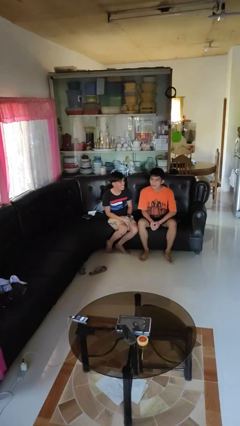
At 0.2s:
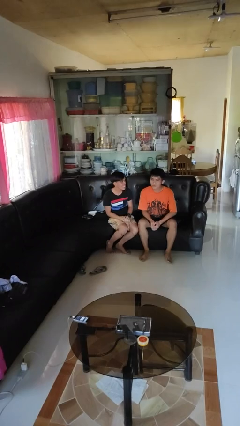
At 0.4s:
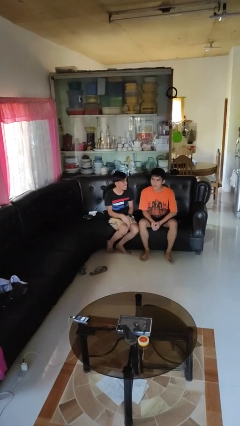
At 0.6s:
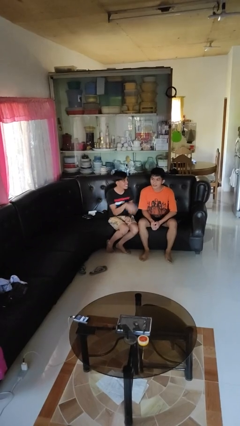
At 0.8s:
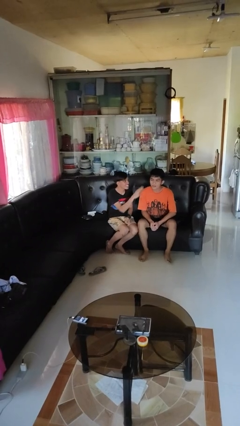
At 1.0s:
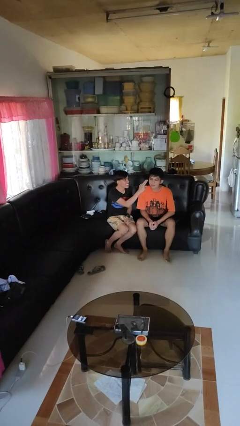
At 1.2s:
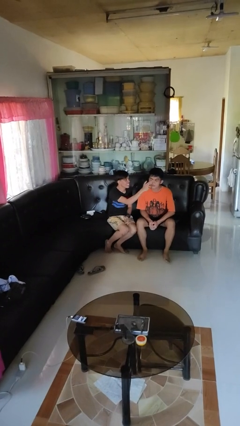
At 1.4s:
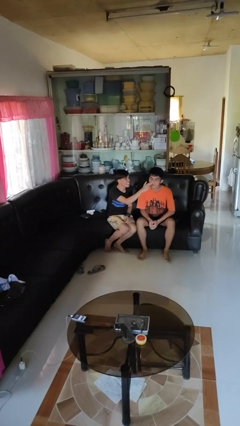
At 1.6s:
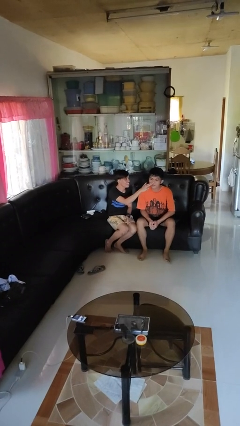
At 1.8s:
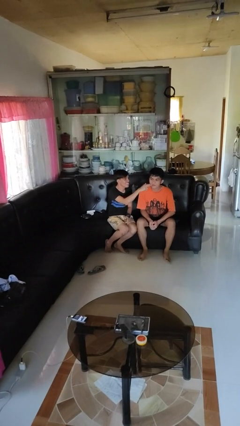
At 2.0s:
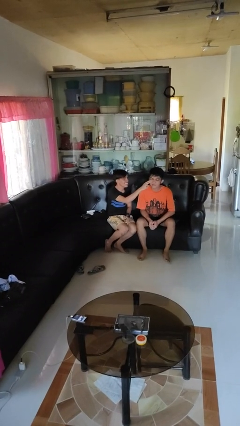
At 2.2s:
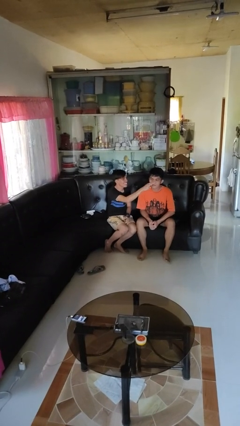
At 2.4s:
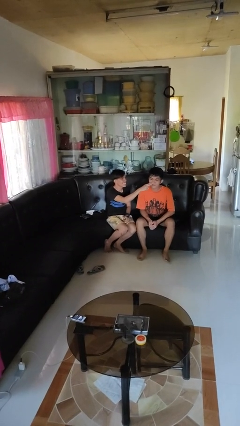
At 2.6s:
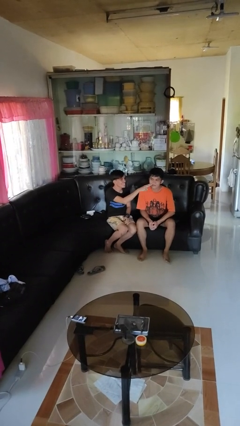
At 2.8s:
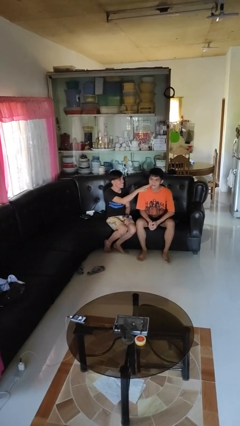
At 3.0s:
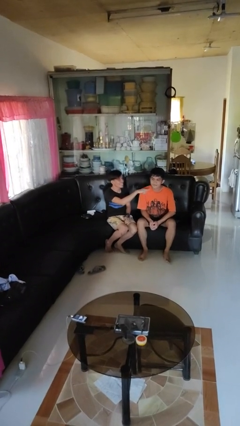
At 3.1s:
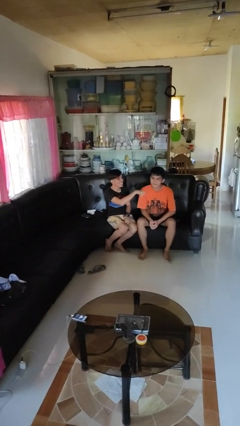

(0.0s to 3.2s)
person touches face of person

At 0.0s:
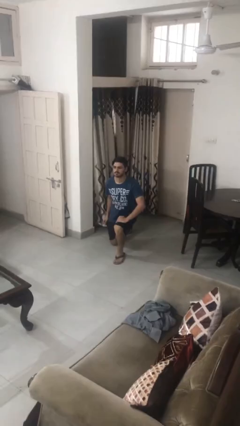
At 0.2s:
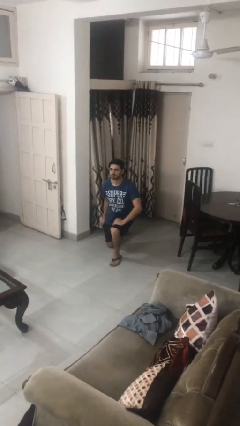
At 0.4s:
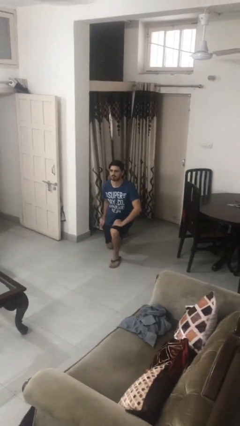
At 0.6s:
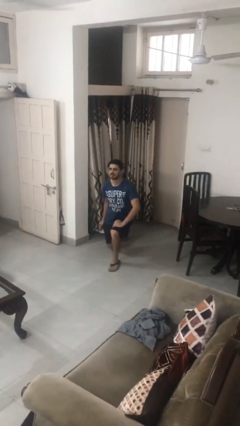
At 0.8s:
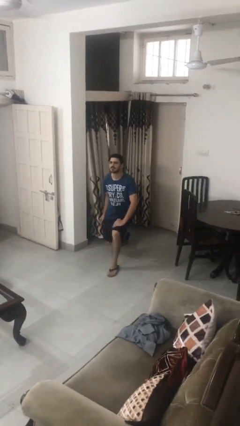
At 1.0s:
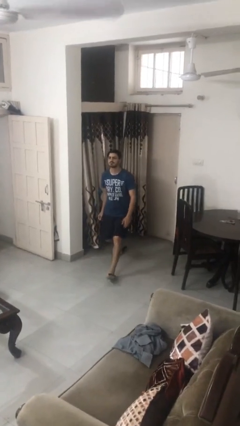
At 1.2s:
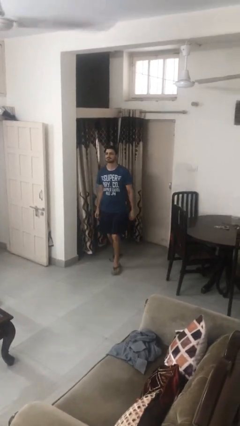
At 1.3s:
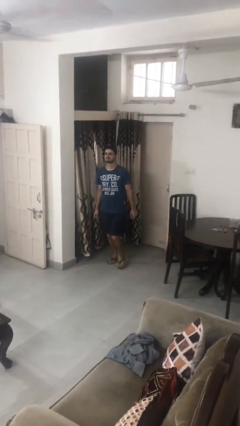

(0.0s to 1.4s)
person stands up from floor

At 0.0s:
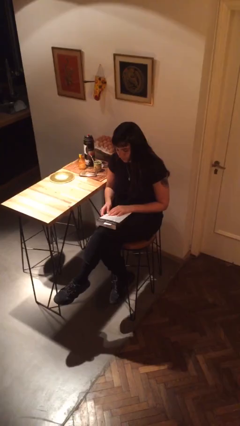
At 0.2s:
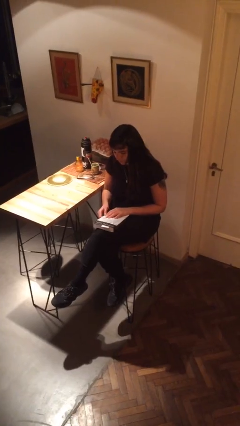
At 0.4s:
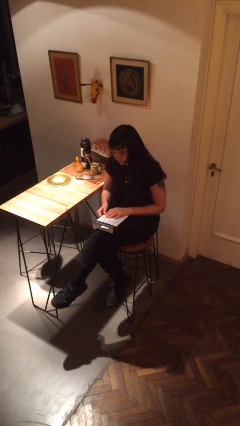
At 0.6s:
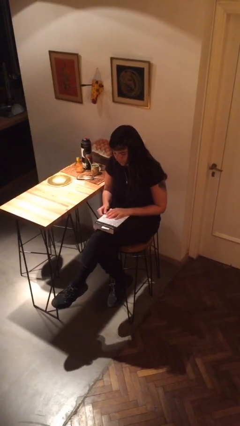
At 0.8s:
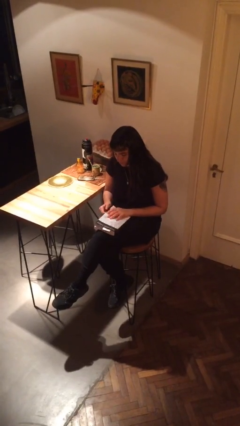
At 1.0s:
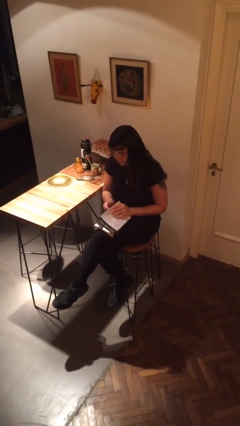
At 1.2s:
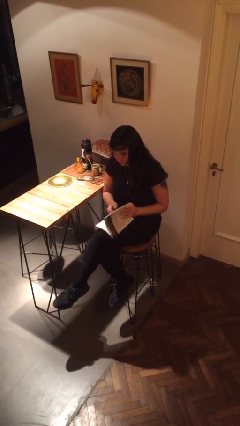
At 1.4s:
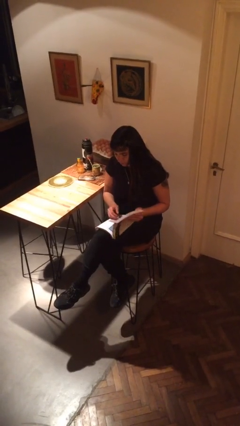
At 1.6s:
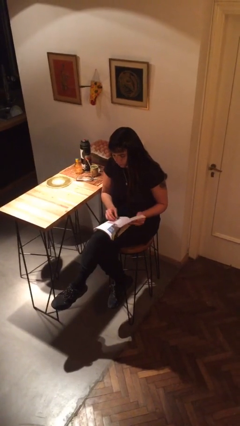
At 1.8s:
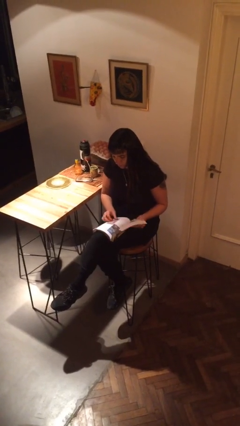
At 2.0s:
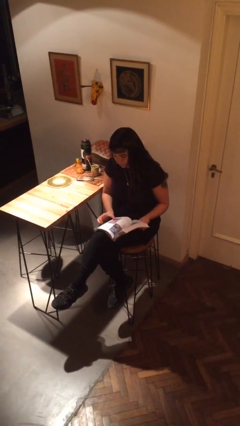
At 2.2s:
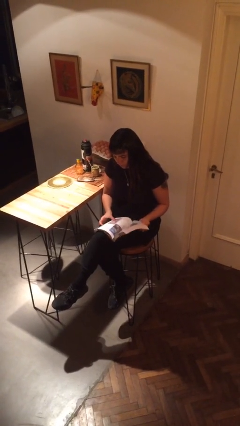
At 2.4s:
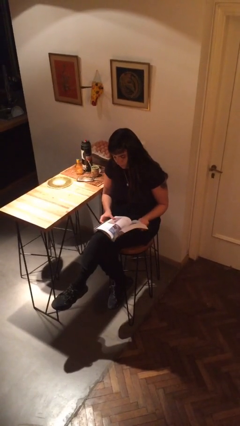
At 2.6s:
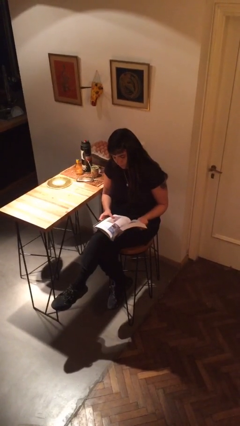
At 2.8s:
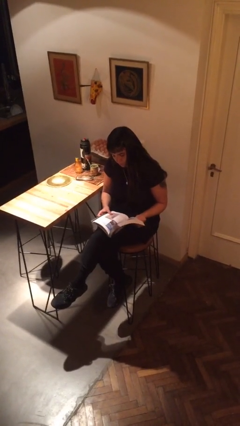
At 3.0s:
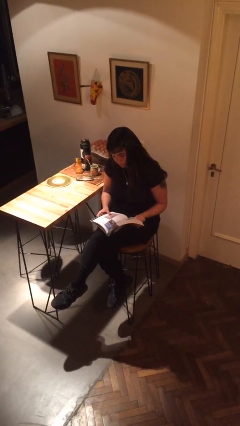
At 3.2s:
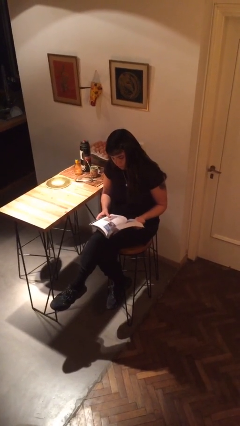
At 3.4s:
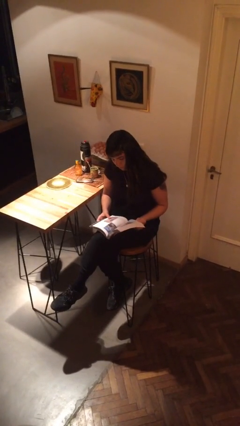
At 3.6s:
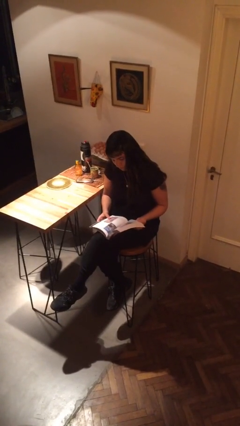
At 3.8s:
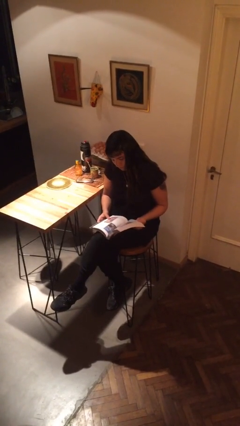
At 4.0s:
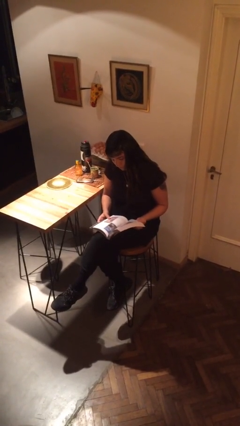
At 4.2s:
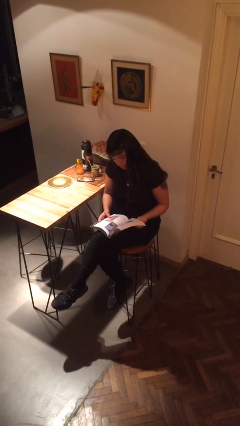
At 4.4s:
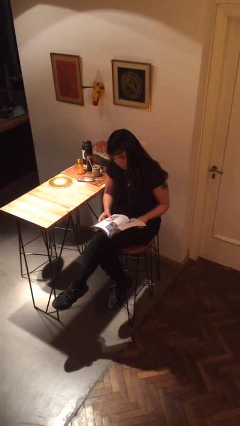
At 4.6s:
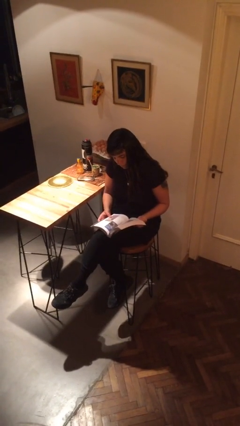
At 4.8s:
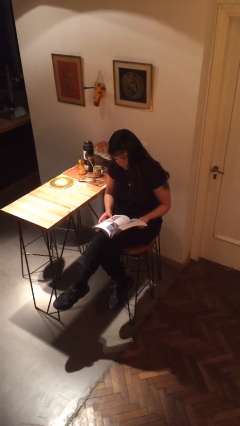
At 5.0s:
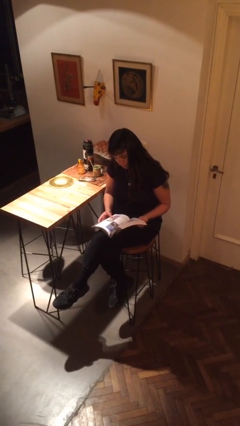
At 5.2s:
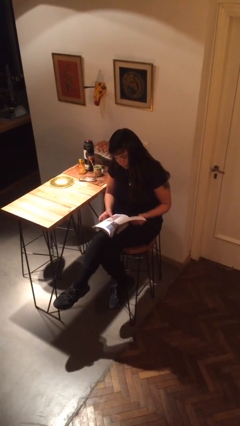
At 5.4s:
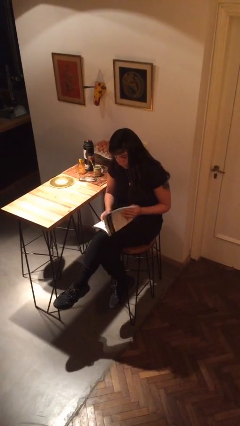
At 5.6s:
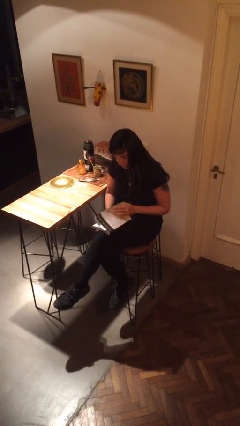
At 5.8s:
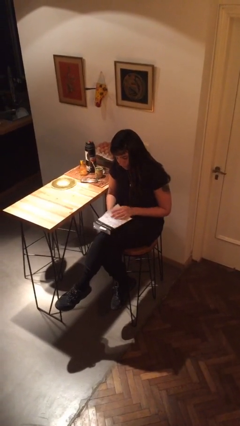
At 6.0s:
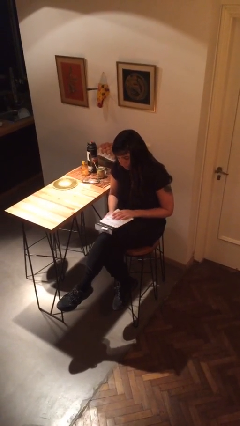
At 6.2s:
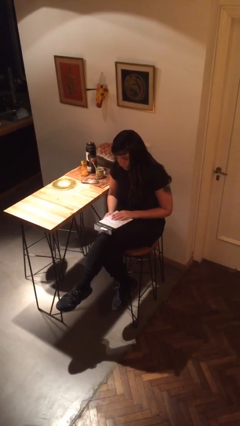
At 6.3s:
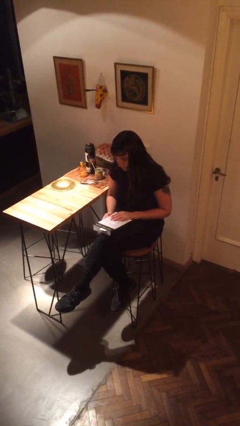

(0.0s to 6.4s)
person reads book

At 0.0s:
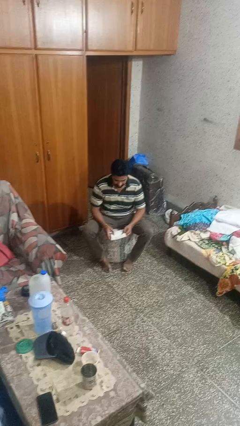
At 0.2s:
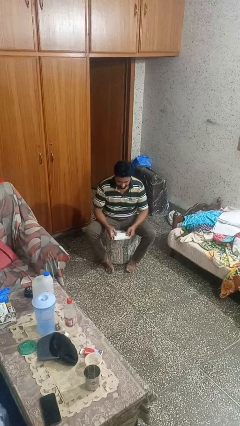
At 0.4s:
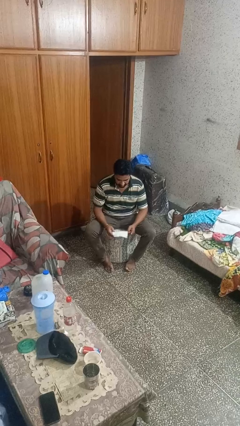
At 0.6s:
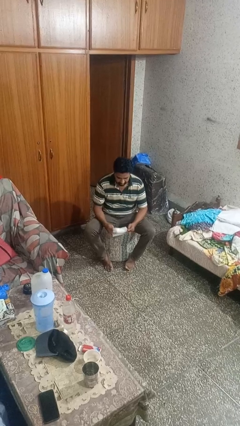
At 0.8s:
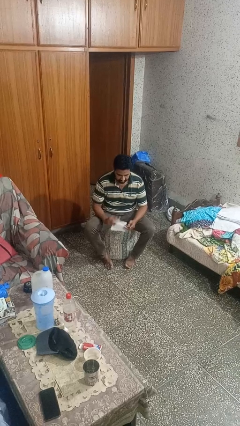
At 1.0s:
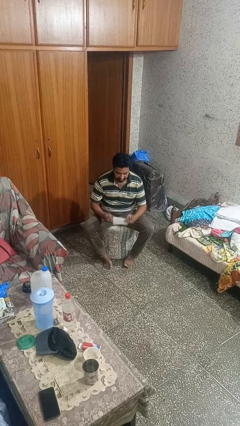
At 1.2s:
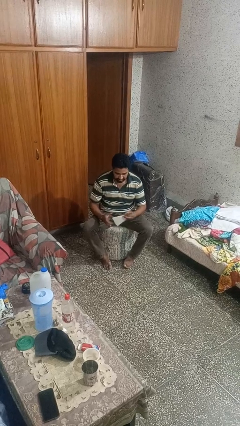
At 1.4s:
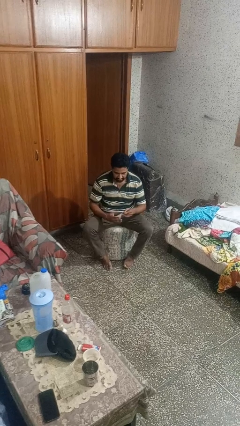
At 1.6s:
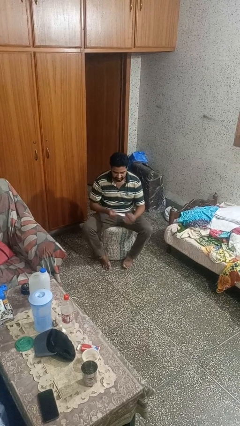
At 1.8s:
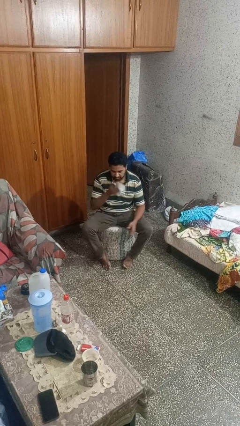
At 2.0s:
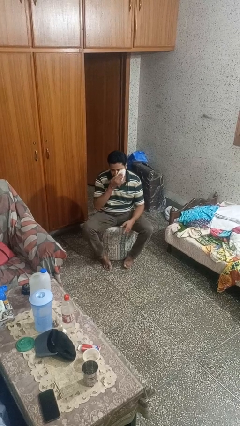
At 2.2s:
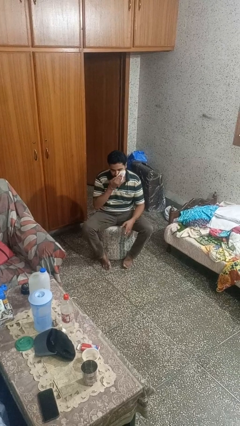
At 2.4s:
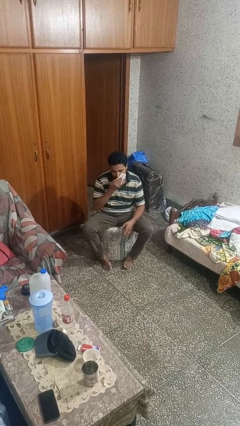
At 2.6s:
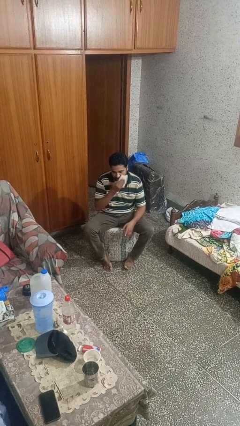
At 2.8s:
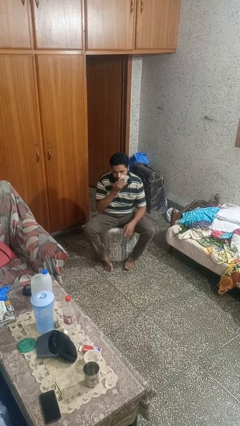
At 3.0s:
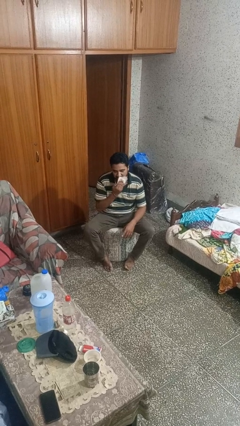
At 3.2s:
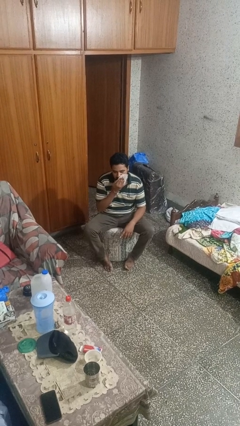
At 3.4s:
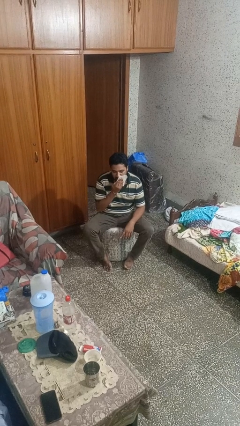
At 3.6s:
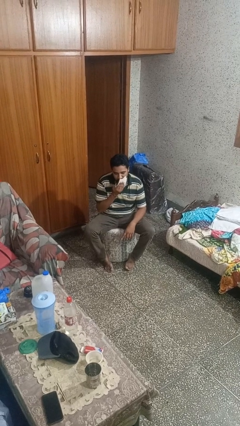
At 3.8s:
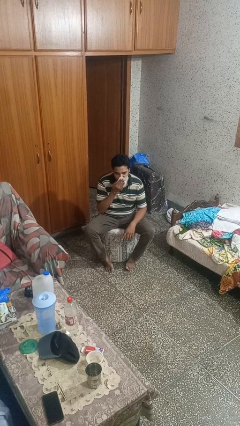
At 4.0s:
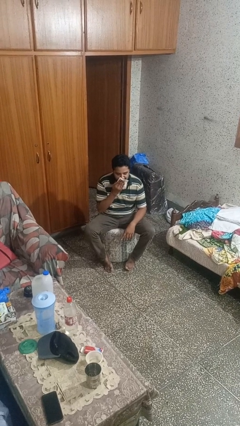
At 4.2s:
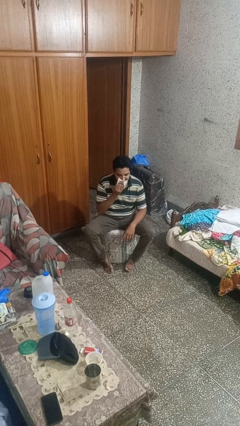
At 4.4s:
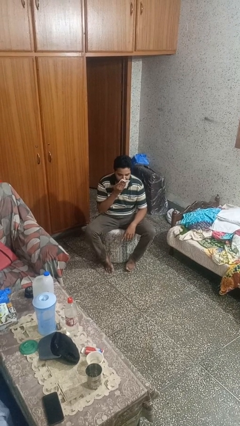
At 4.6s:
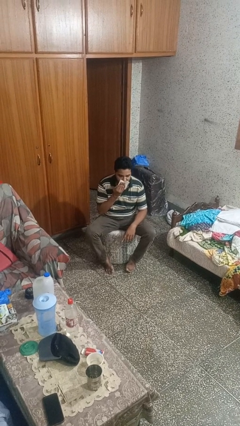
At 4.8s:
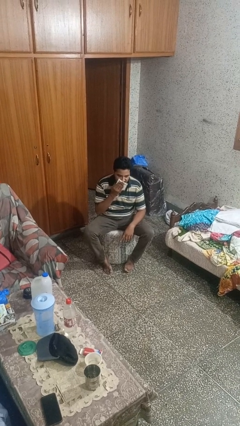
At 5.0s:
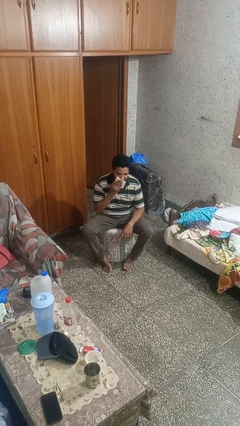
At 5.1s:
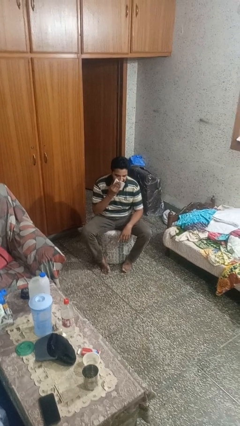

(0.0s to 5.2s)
person wipes mouth with napkin

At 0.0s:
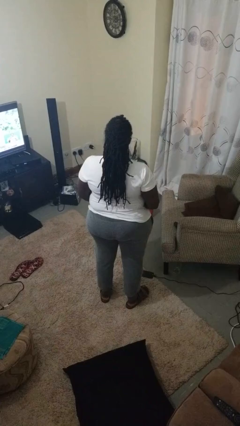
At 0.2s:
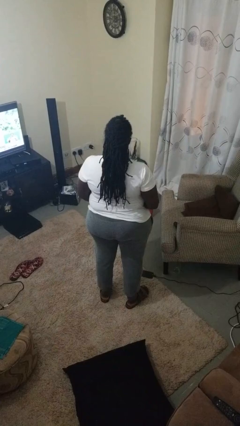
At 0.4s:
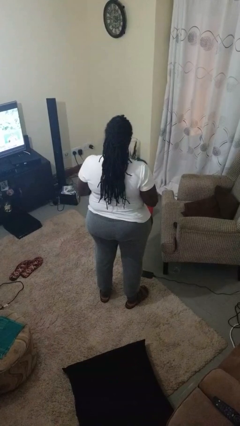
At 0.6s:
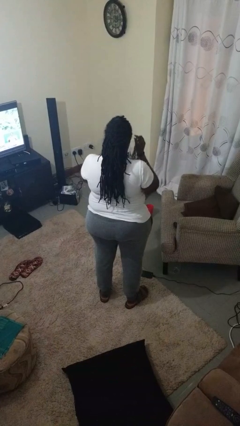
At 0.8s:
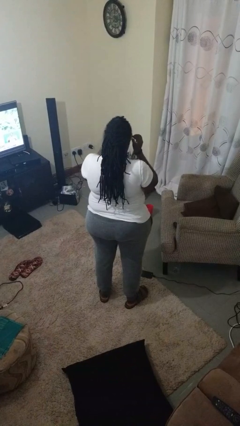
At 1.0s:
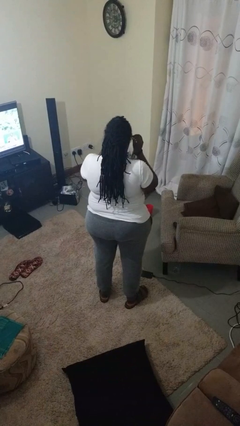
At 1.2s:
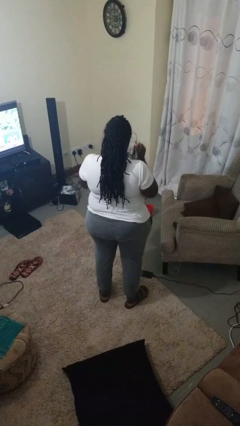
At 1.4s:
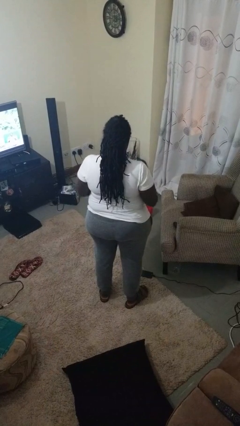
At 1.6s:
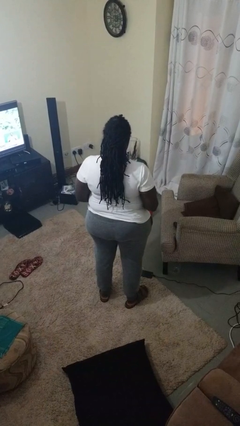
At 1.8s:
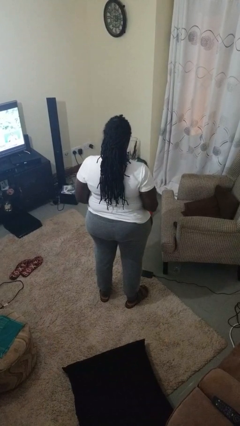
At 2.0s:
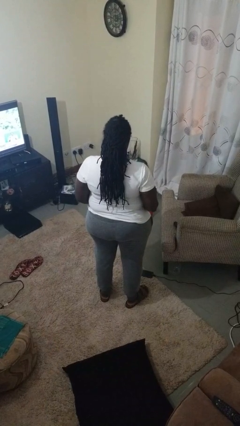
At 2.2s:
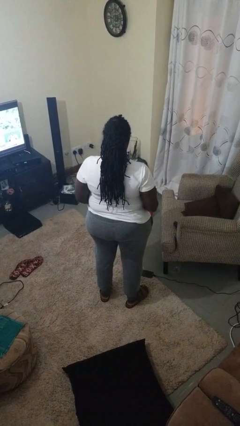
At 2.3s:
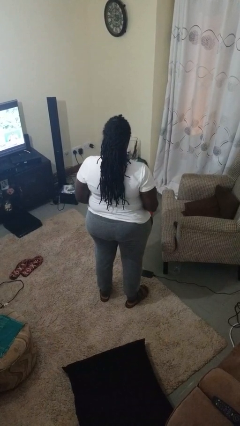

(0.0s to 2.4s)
person takes off sunglasses
